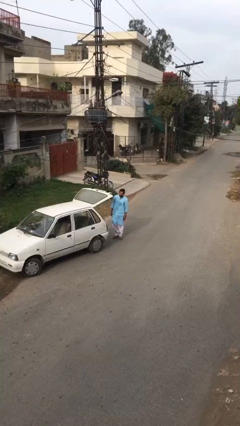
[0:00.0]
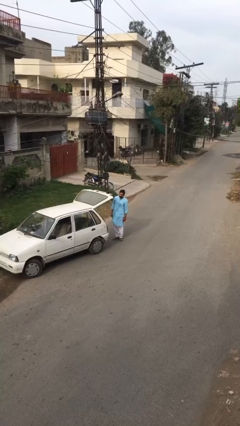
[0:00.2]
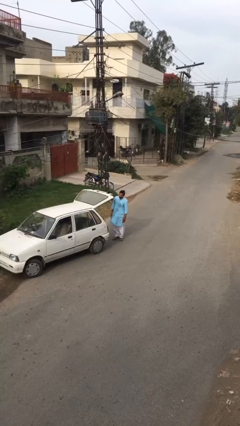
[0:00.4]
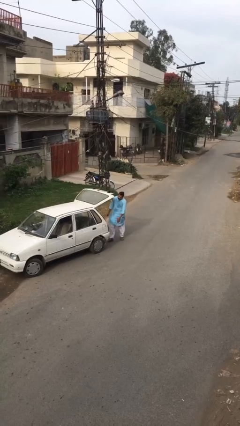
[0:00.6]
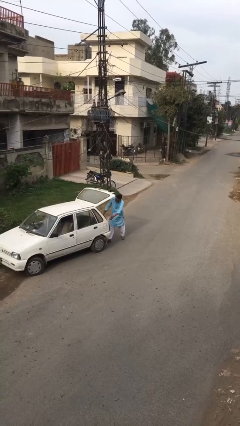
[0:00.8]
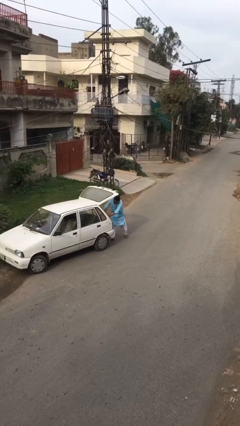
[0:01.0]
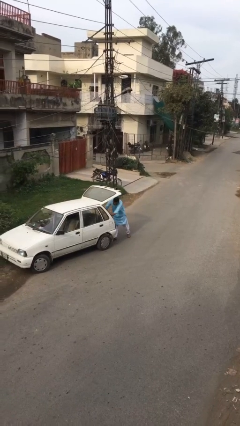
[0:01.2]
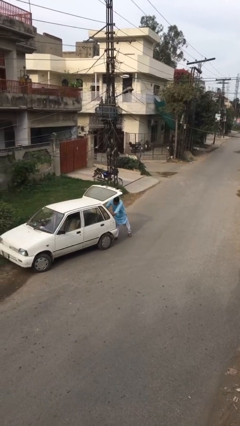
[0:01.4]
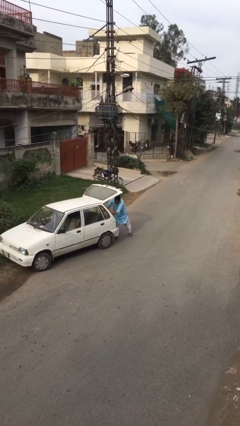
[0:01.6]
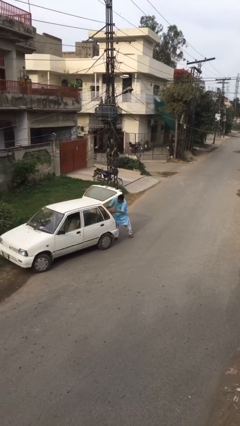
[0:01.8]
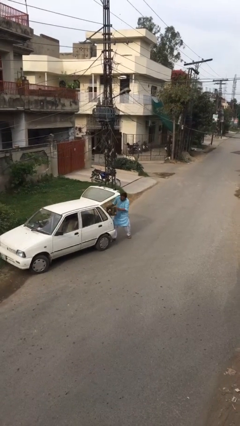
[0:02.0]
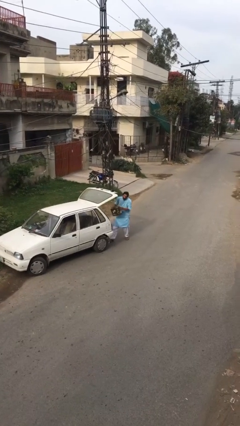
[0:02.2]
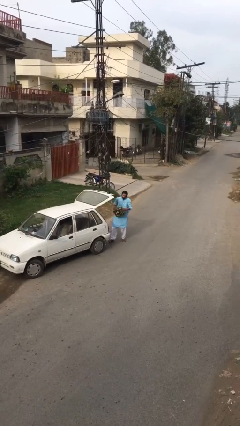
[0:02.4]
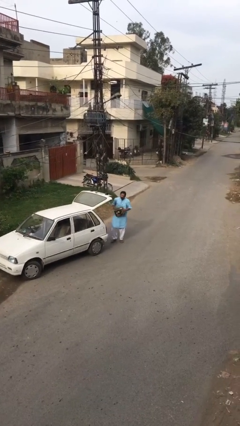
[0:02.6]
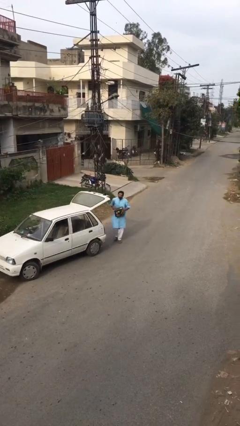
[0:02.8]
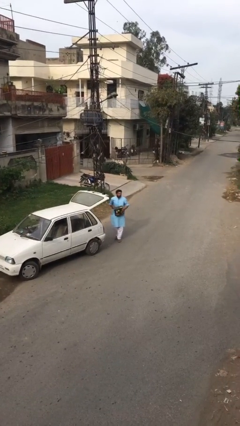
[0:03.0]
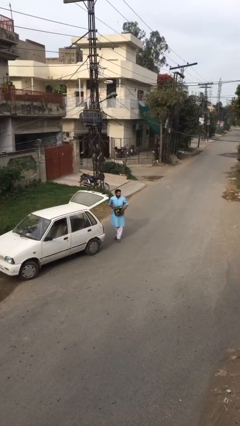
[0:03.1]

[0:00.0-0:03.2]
person unloads car

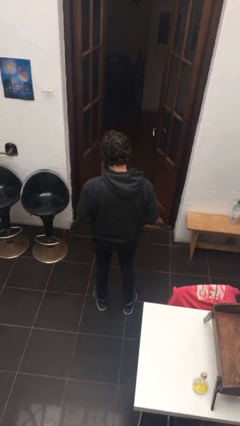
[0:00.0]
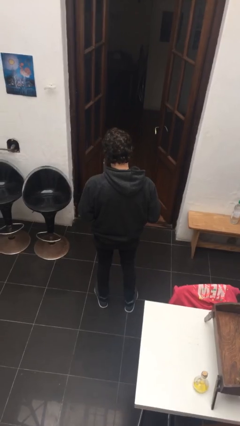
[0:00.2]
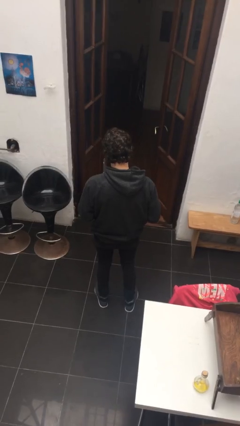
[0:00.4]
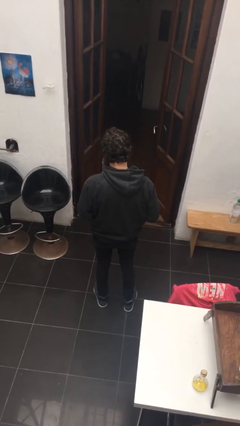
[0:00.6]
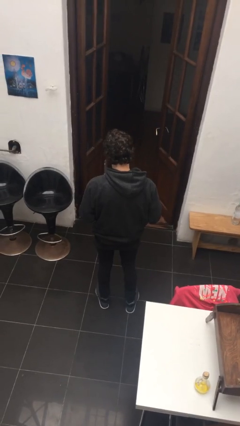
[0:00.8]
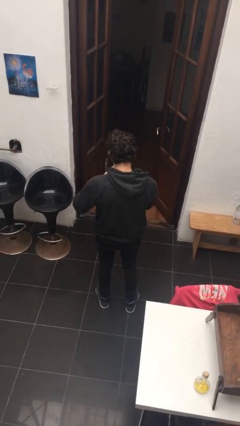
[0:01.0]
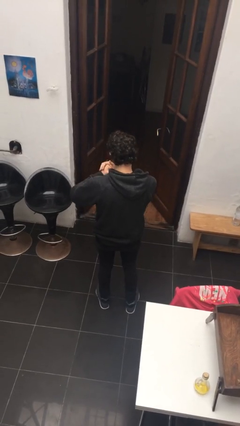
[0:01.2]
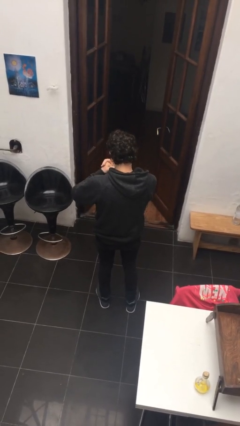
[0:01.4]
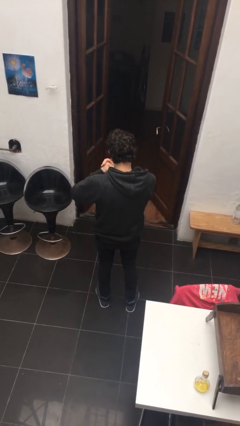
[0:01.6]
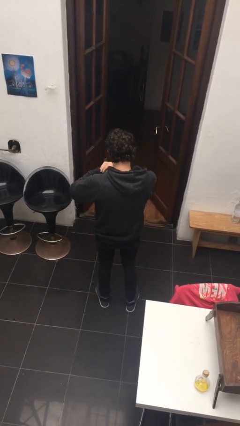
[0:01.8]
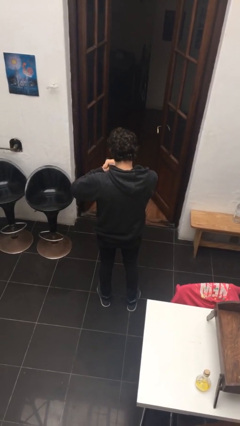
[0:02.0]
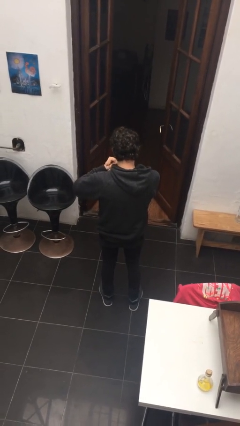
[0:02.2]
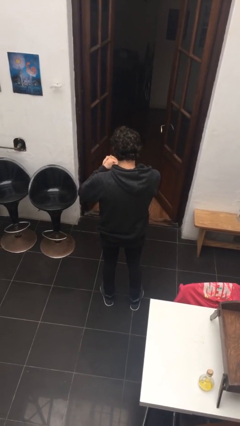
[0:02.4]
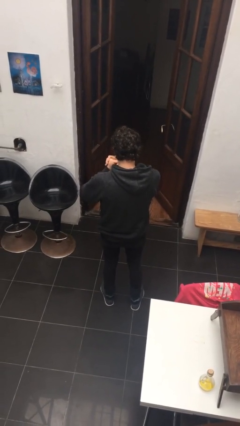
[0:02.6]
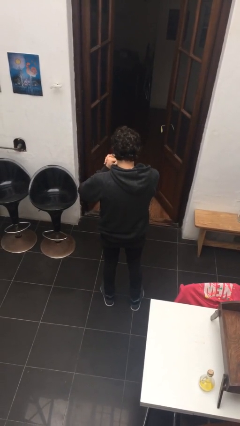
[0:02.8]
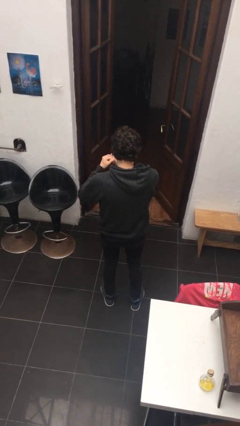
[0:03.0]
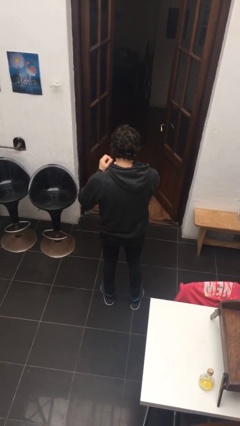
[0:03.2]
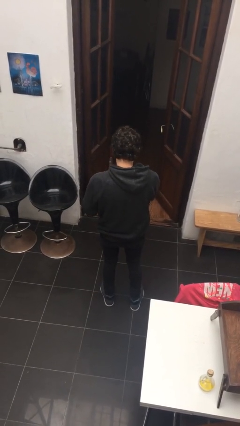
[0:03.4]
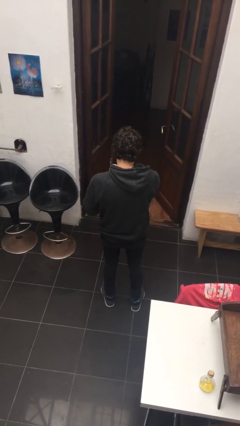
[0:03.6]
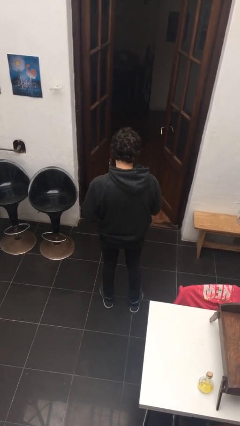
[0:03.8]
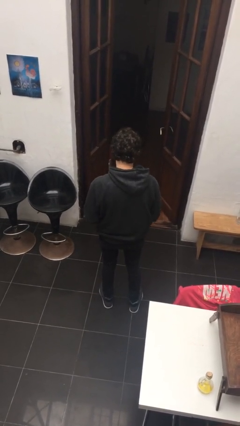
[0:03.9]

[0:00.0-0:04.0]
person cracks knuckles

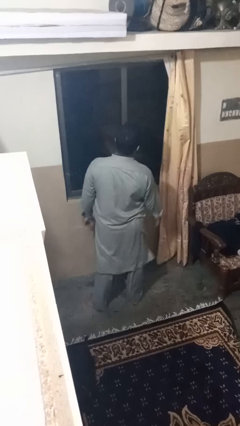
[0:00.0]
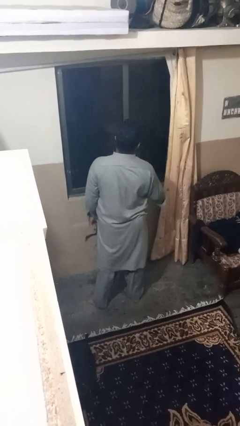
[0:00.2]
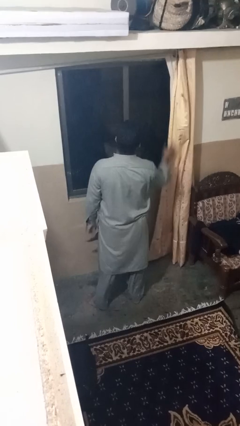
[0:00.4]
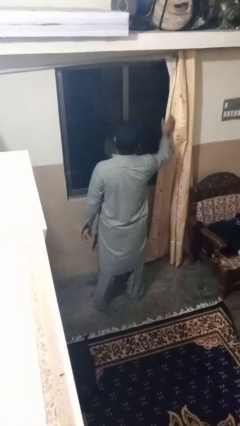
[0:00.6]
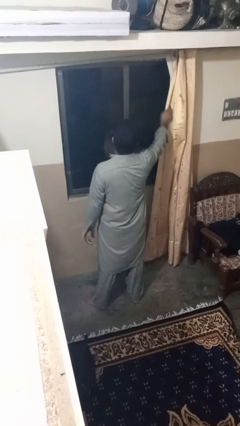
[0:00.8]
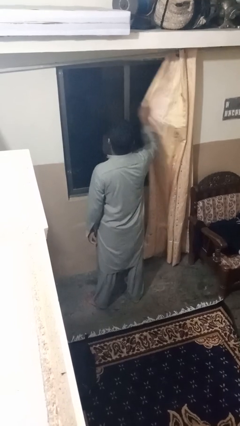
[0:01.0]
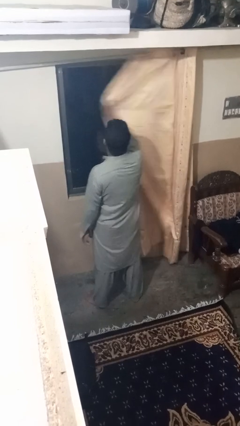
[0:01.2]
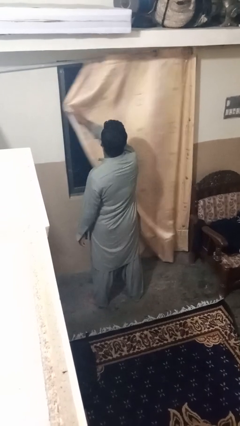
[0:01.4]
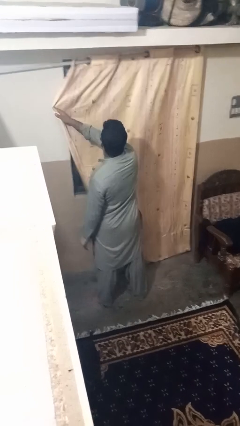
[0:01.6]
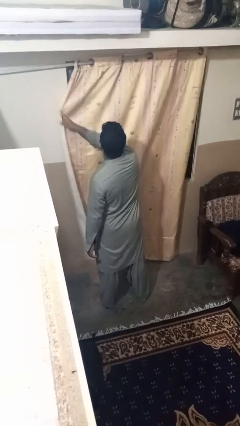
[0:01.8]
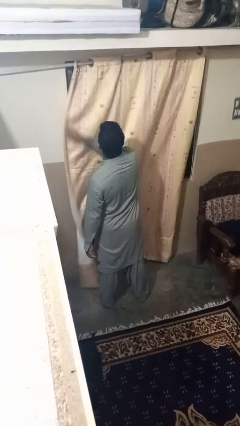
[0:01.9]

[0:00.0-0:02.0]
person closes curtains

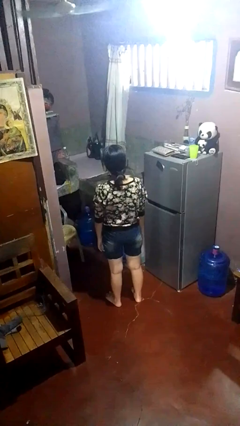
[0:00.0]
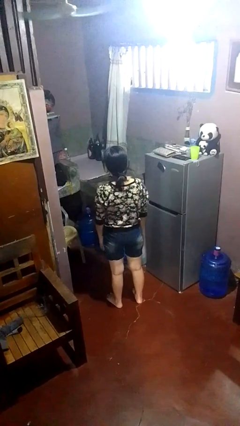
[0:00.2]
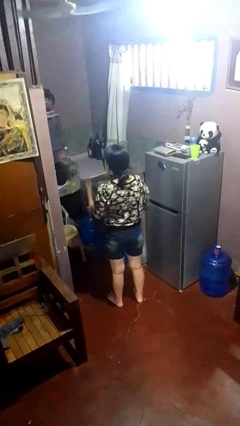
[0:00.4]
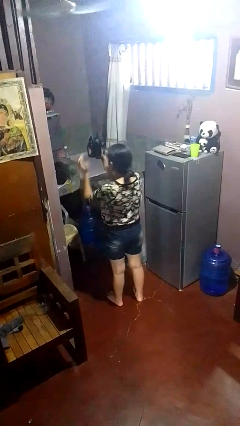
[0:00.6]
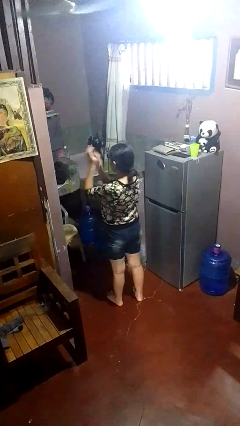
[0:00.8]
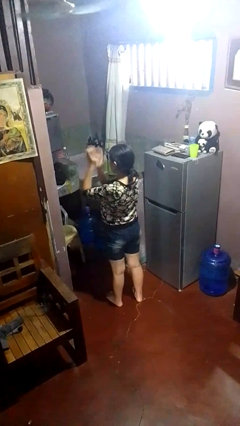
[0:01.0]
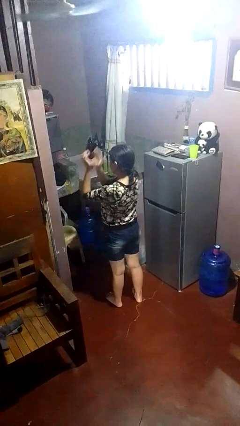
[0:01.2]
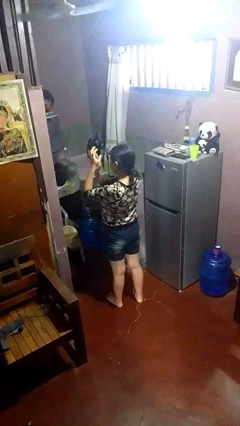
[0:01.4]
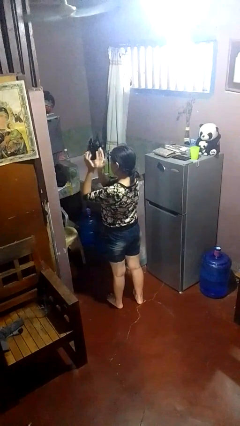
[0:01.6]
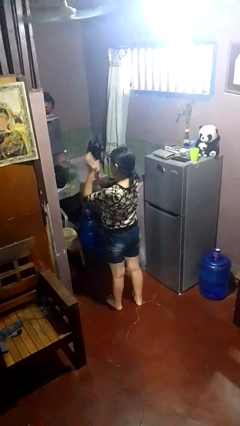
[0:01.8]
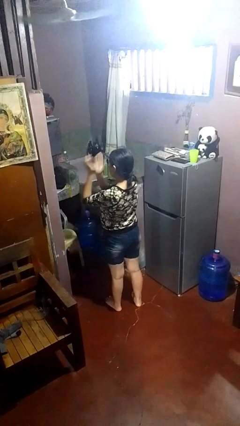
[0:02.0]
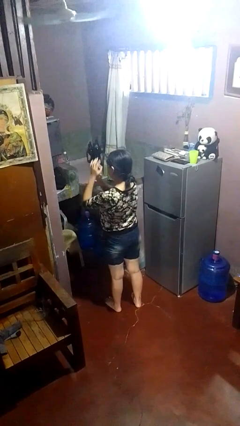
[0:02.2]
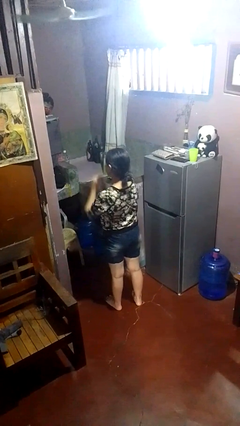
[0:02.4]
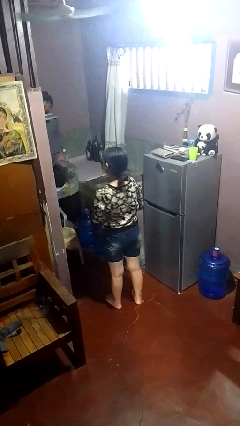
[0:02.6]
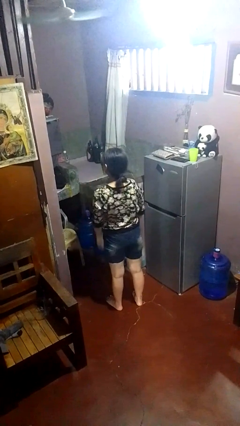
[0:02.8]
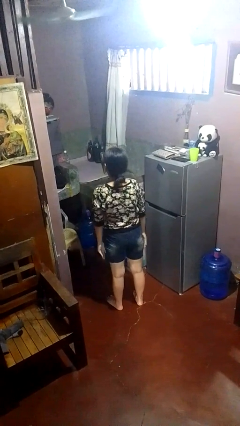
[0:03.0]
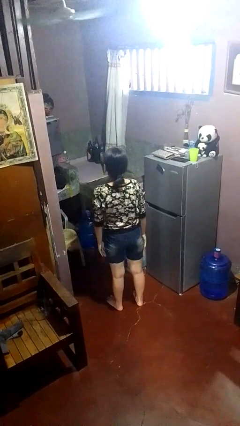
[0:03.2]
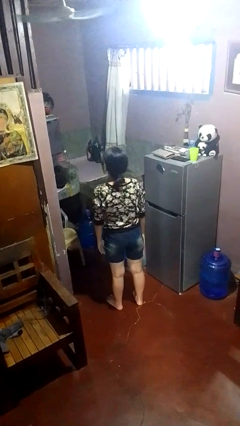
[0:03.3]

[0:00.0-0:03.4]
person claps hands

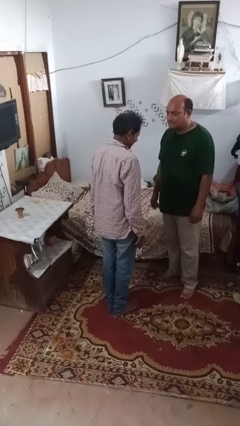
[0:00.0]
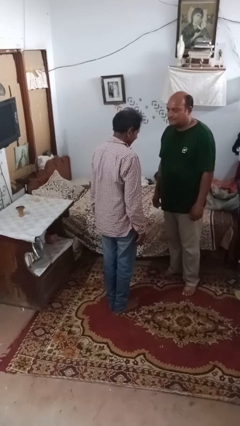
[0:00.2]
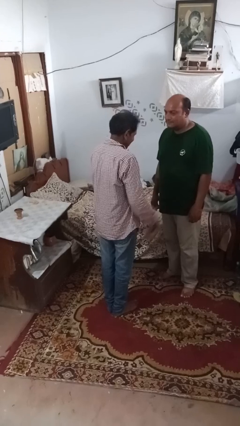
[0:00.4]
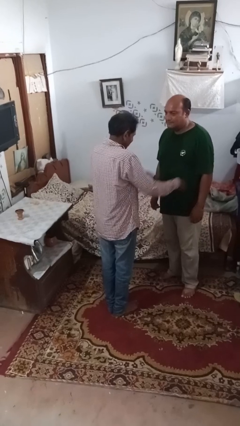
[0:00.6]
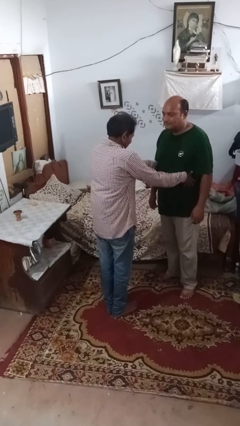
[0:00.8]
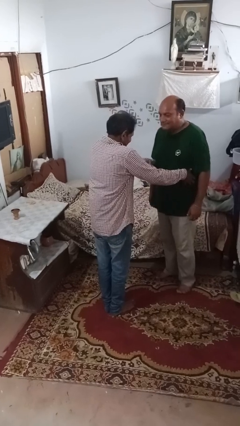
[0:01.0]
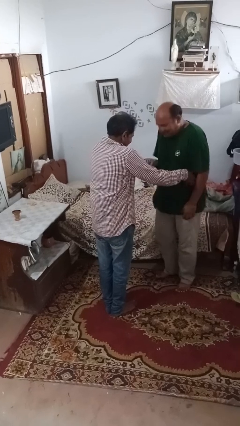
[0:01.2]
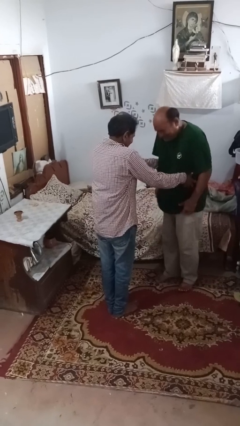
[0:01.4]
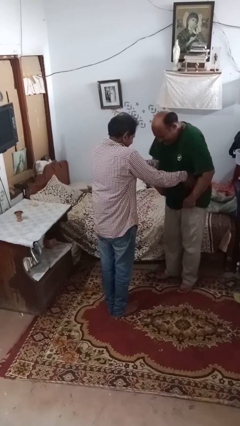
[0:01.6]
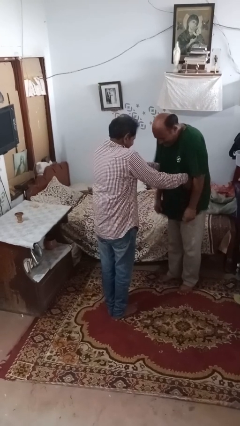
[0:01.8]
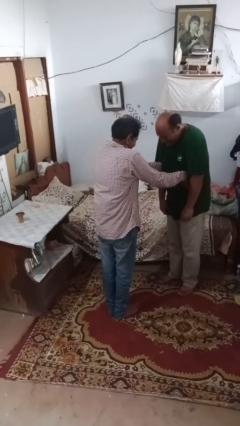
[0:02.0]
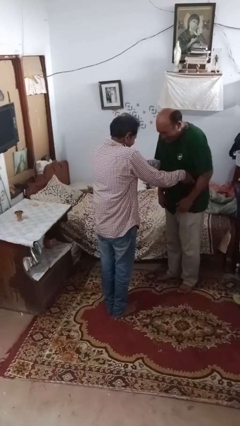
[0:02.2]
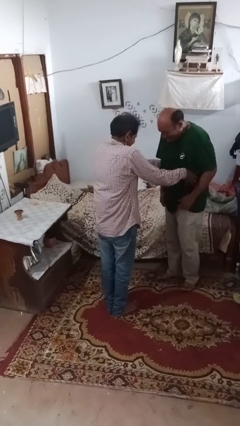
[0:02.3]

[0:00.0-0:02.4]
person tickles person

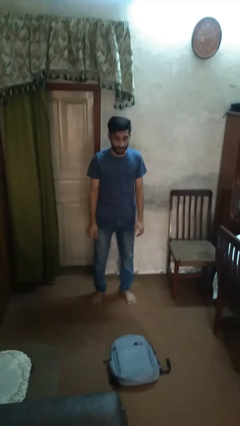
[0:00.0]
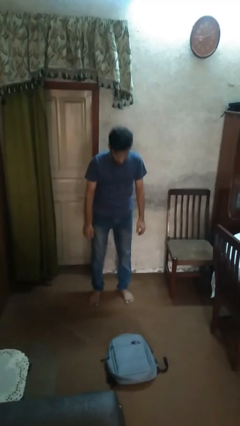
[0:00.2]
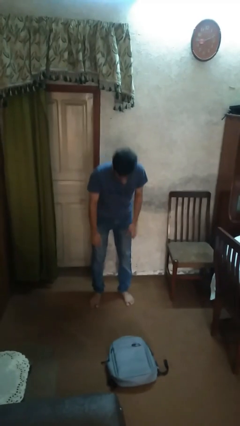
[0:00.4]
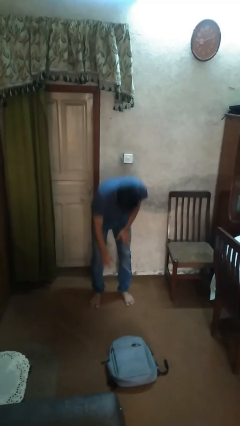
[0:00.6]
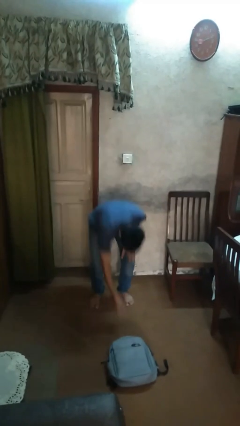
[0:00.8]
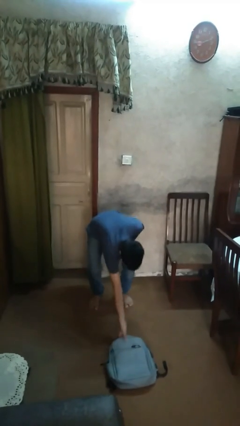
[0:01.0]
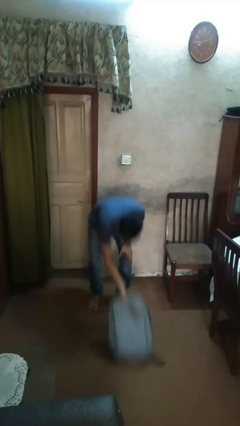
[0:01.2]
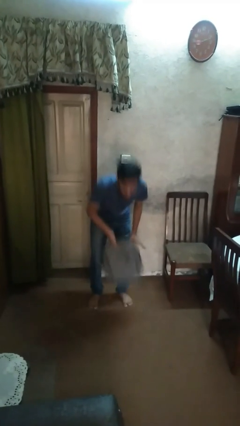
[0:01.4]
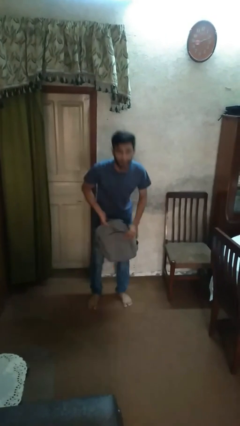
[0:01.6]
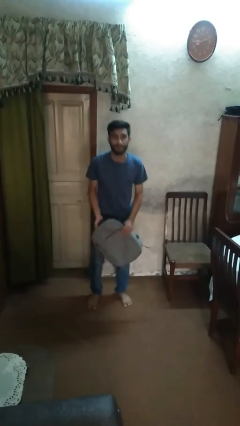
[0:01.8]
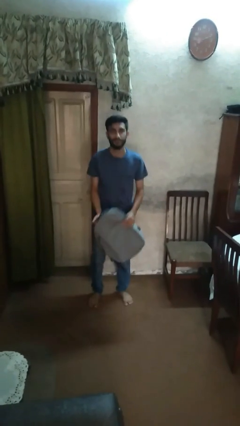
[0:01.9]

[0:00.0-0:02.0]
person picks up object from floor
